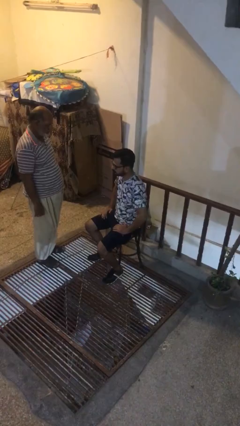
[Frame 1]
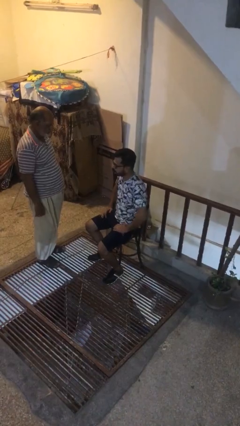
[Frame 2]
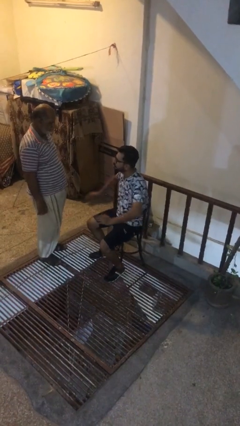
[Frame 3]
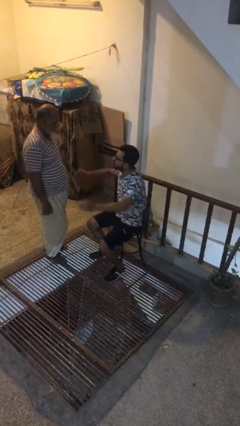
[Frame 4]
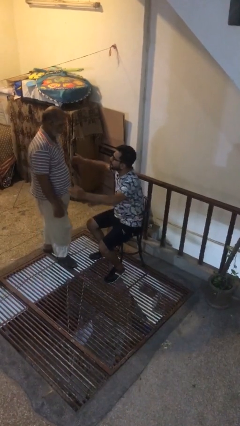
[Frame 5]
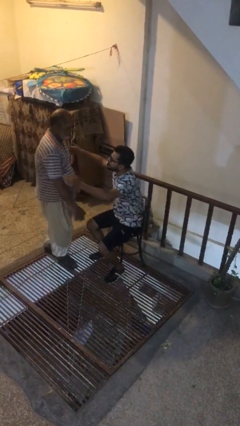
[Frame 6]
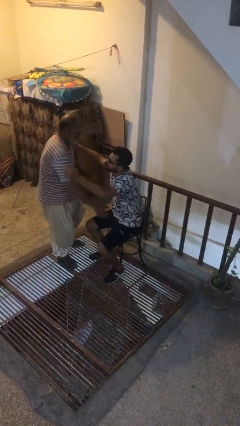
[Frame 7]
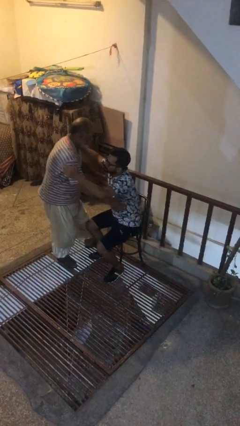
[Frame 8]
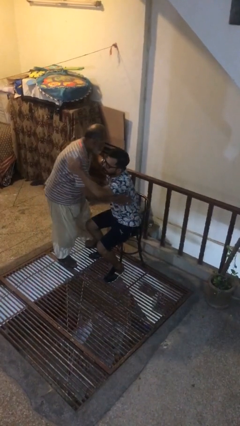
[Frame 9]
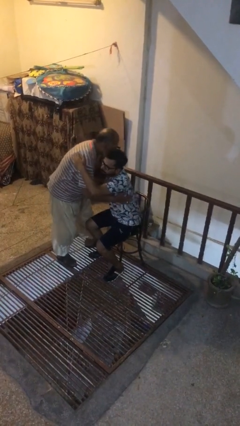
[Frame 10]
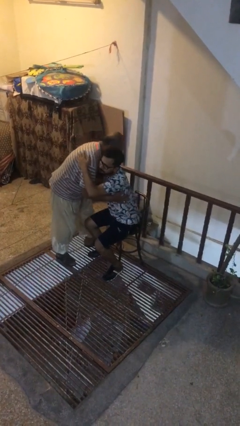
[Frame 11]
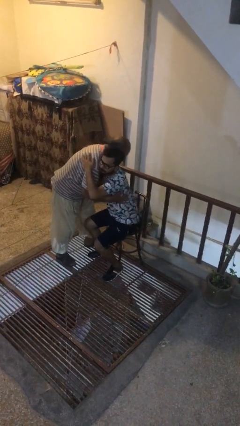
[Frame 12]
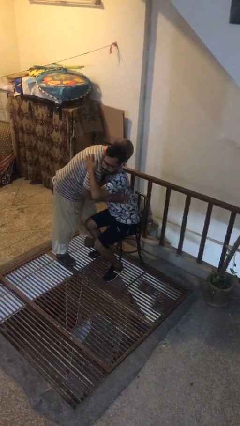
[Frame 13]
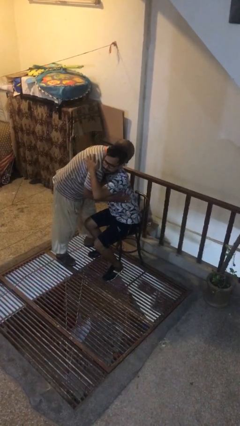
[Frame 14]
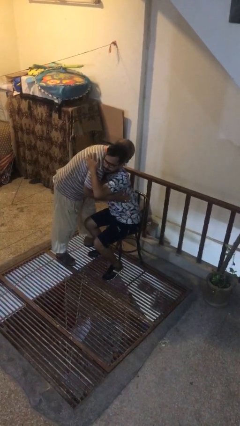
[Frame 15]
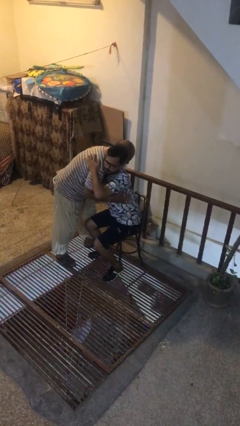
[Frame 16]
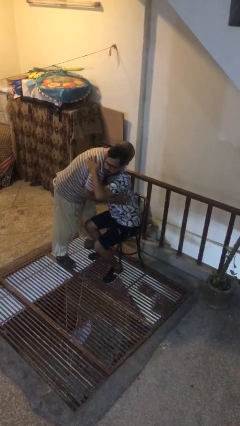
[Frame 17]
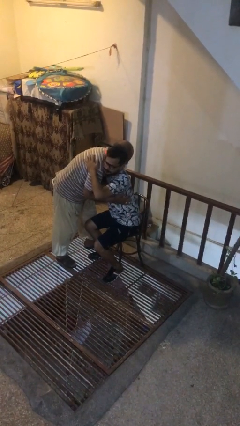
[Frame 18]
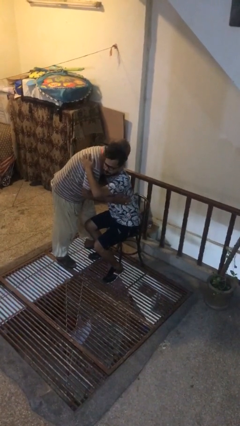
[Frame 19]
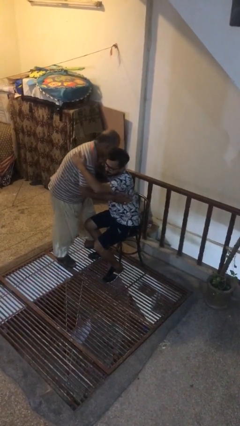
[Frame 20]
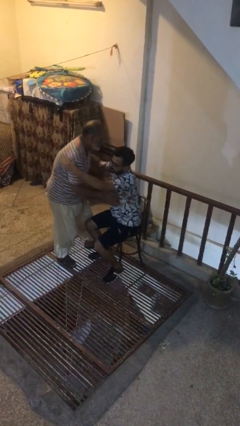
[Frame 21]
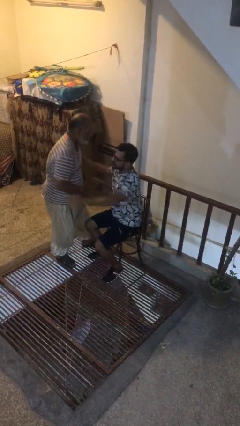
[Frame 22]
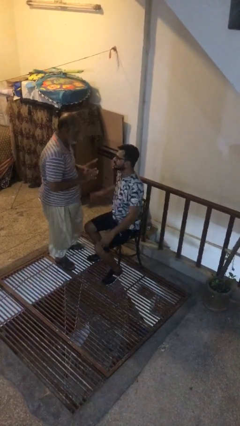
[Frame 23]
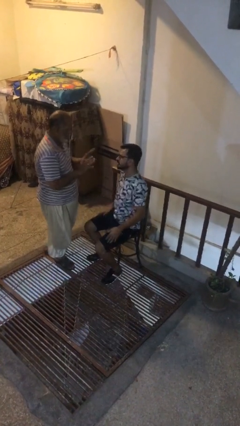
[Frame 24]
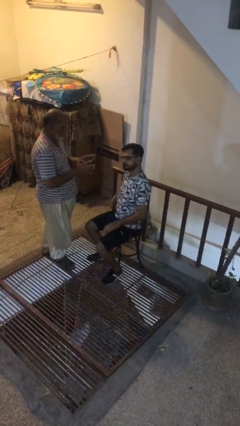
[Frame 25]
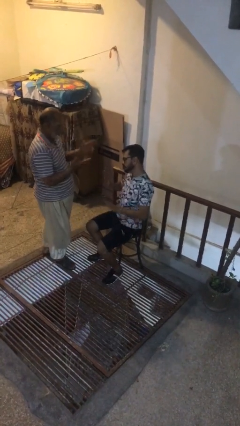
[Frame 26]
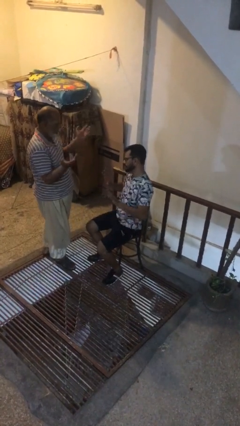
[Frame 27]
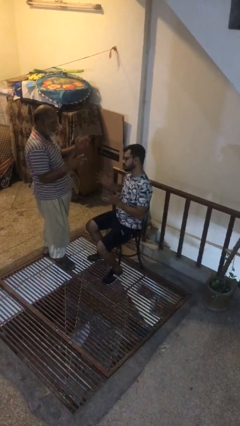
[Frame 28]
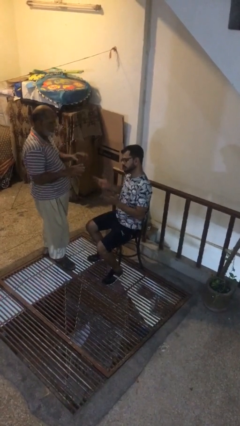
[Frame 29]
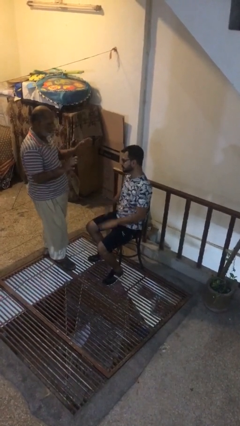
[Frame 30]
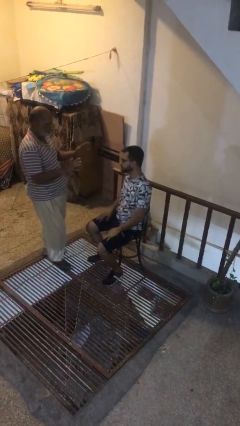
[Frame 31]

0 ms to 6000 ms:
person embraces person

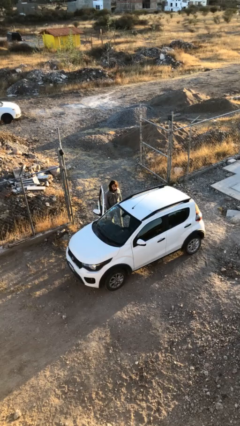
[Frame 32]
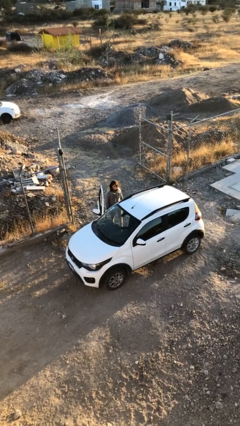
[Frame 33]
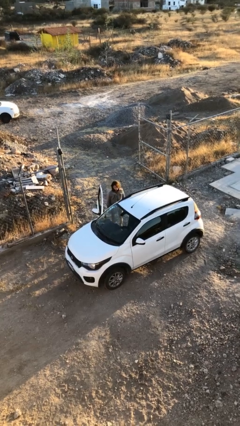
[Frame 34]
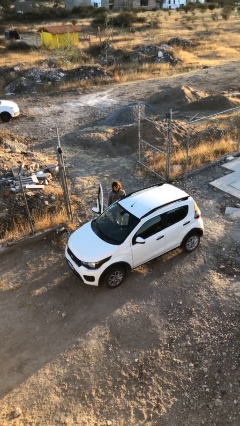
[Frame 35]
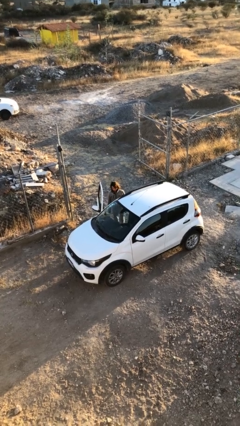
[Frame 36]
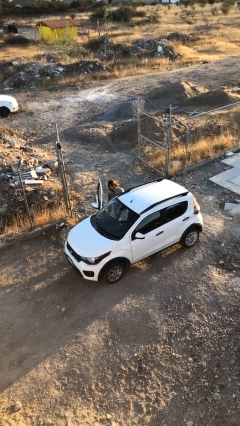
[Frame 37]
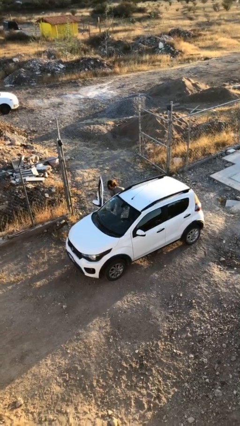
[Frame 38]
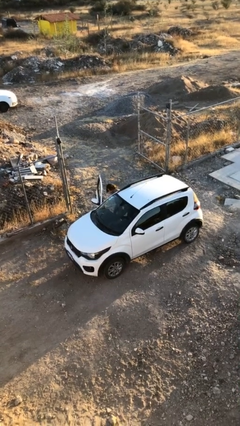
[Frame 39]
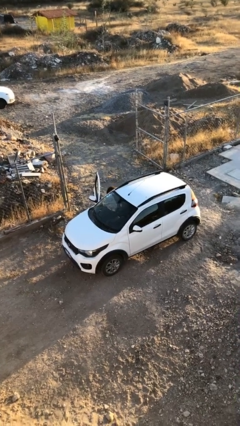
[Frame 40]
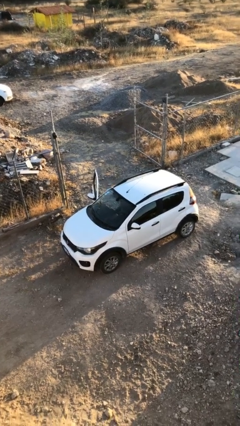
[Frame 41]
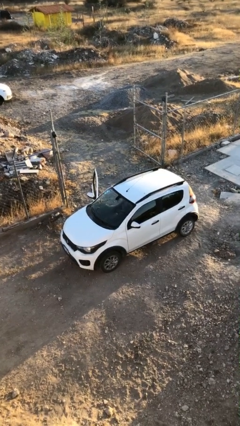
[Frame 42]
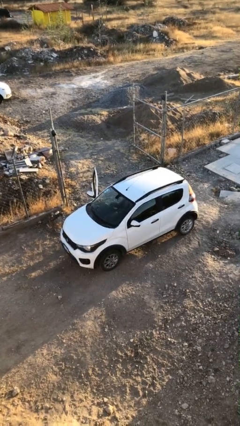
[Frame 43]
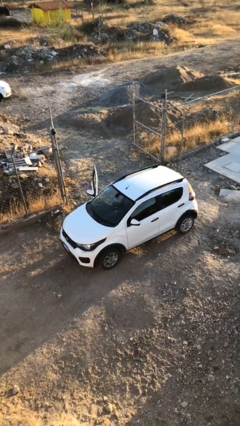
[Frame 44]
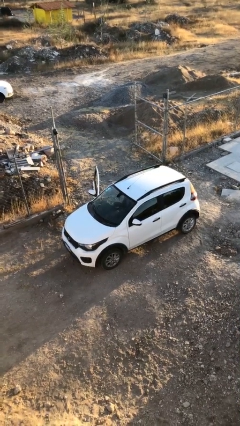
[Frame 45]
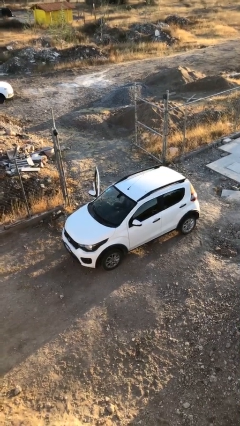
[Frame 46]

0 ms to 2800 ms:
person enters car

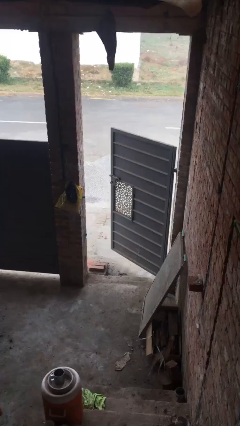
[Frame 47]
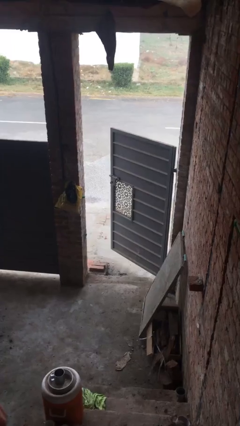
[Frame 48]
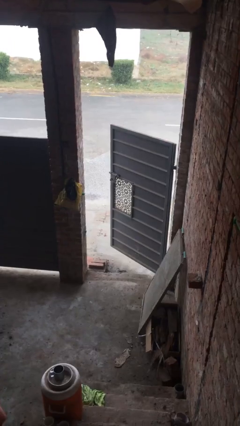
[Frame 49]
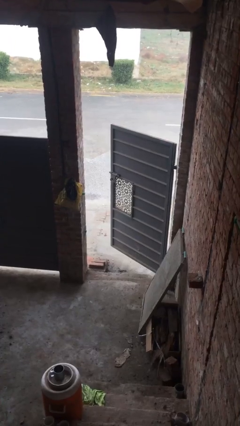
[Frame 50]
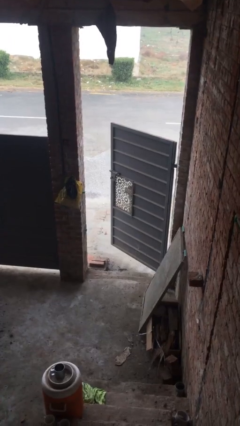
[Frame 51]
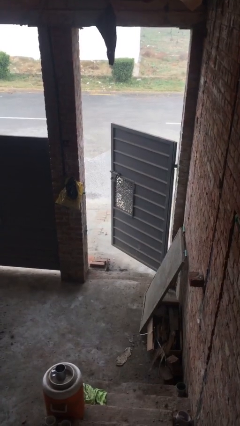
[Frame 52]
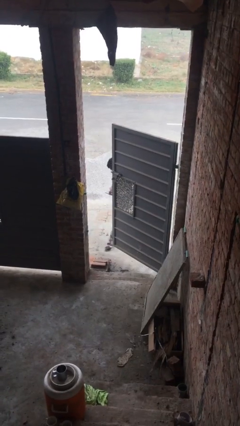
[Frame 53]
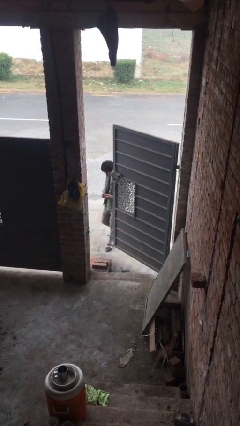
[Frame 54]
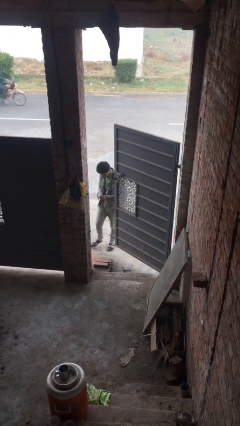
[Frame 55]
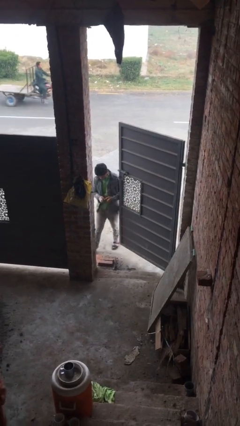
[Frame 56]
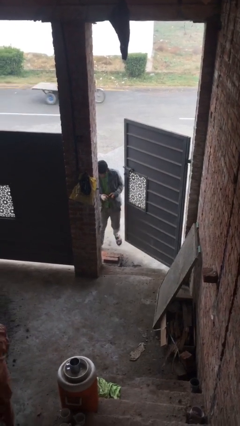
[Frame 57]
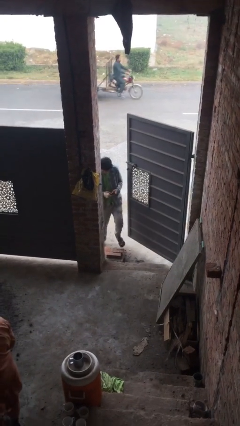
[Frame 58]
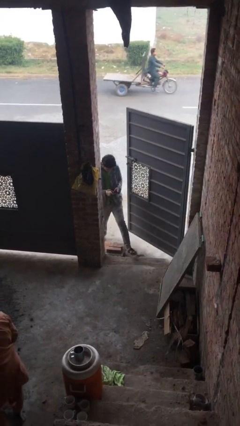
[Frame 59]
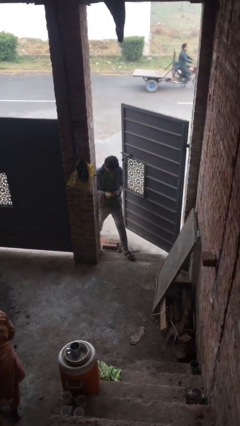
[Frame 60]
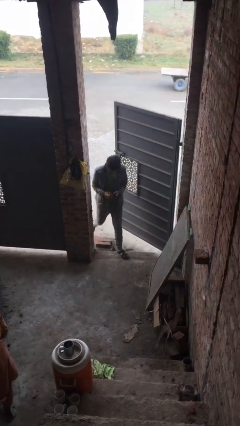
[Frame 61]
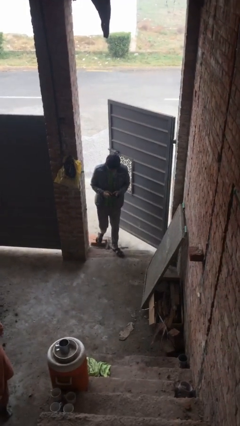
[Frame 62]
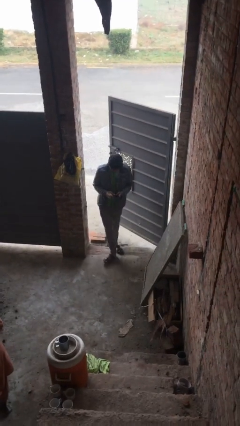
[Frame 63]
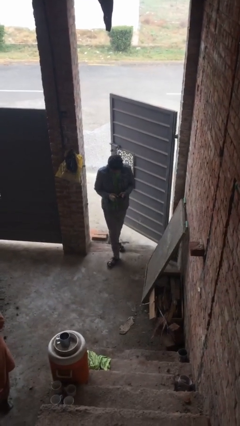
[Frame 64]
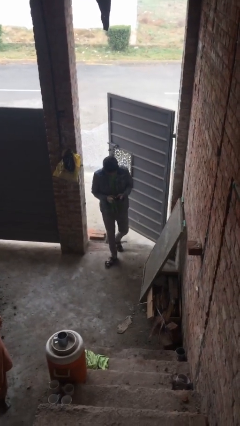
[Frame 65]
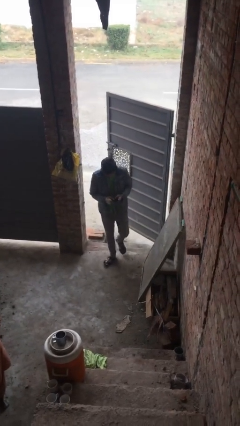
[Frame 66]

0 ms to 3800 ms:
person enters scene through structure

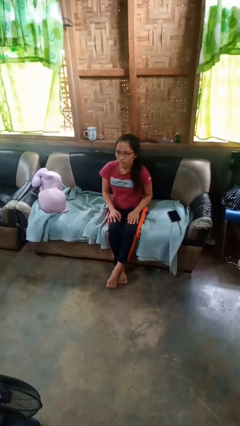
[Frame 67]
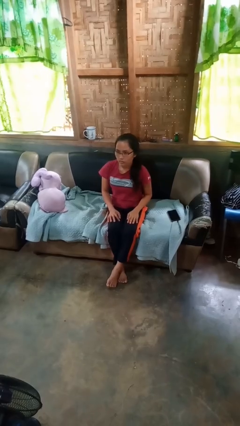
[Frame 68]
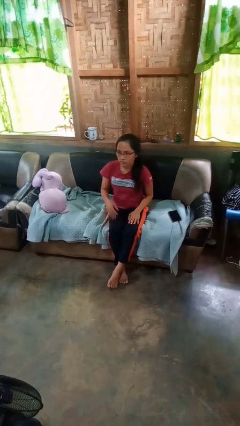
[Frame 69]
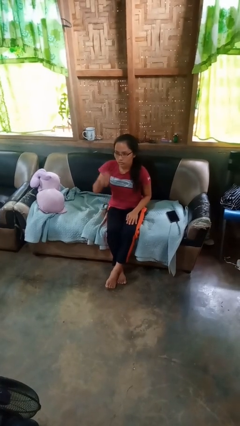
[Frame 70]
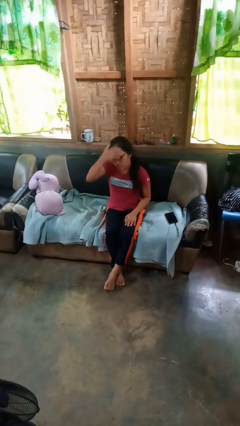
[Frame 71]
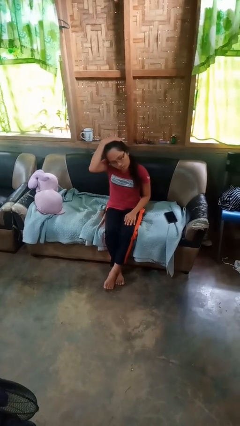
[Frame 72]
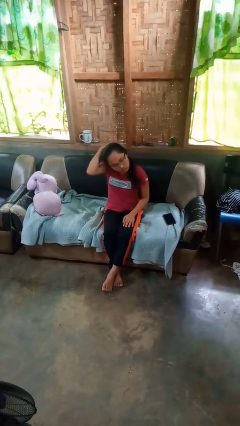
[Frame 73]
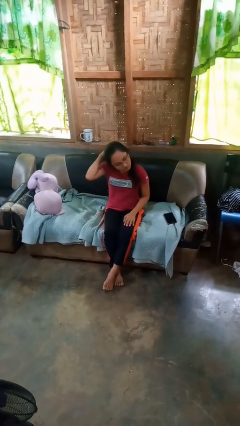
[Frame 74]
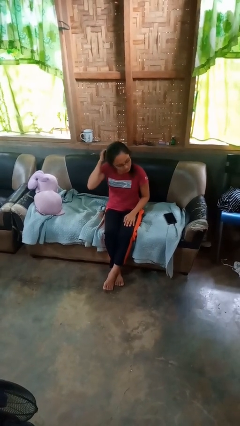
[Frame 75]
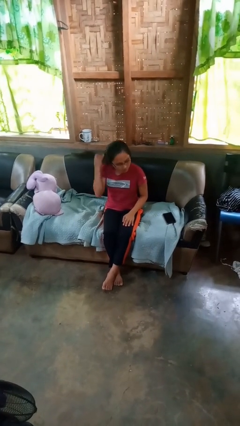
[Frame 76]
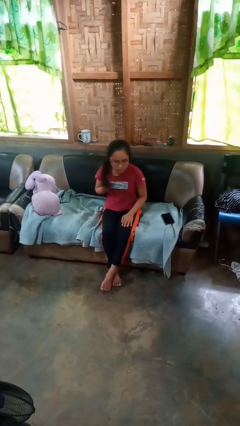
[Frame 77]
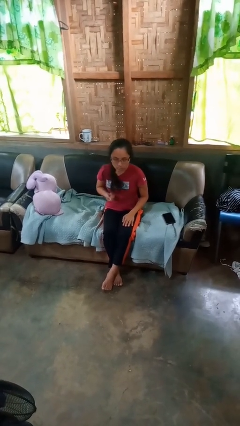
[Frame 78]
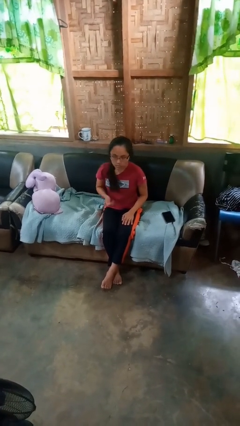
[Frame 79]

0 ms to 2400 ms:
person strokes hair

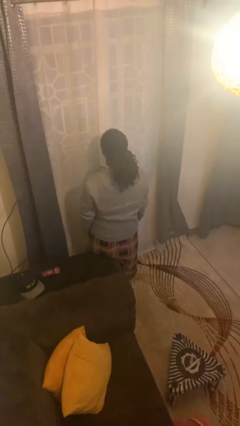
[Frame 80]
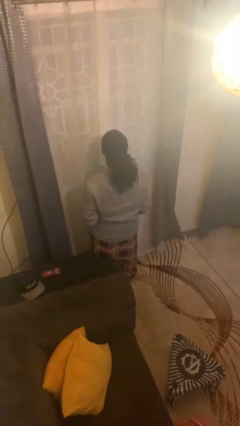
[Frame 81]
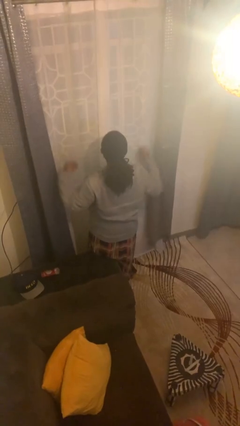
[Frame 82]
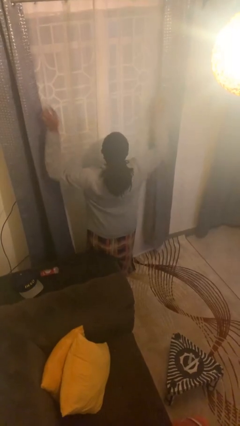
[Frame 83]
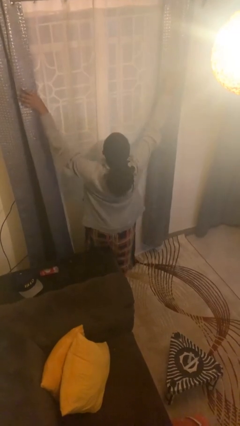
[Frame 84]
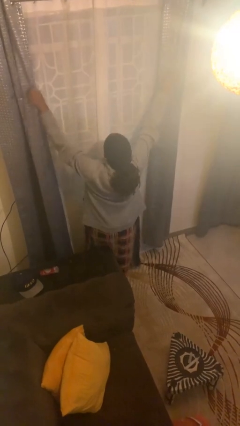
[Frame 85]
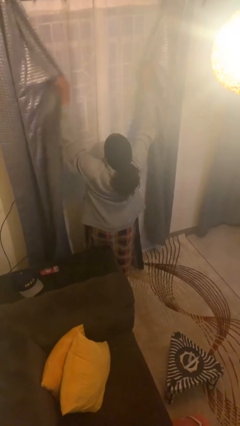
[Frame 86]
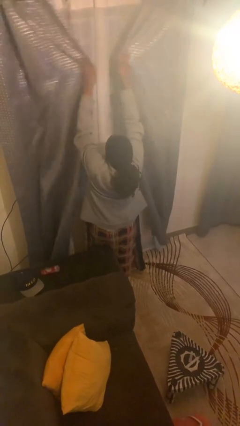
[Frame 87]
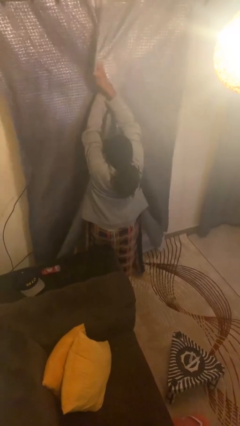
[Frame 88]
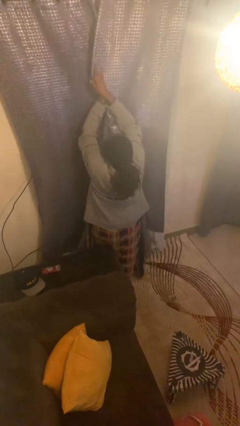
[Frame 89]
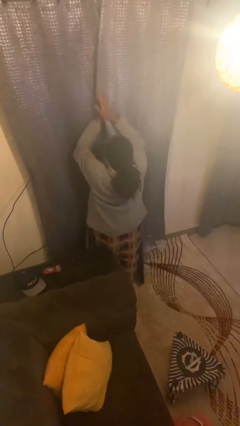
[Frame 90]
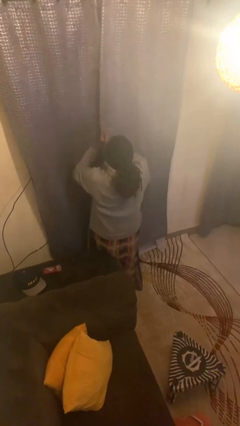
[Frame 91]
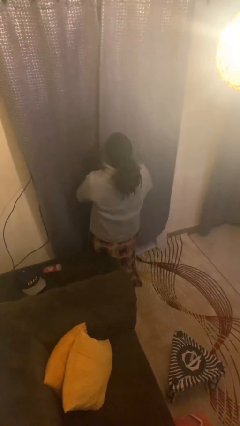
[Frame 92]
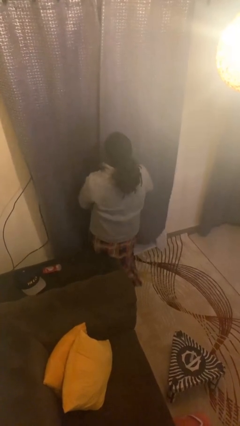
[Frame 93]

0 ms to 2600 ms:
person closes curtains

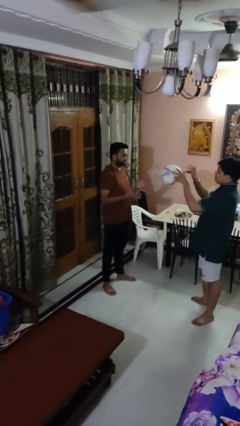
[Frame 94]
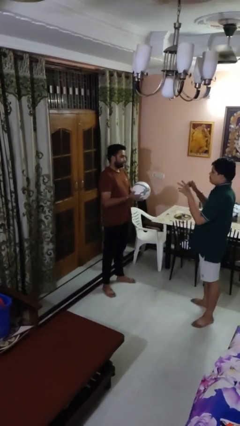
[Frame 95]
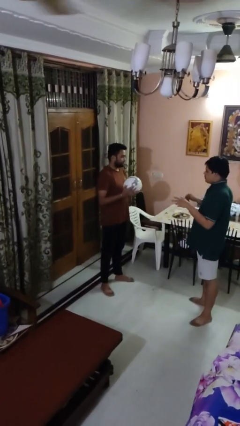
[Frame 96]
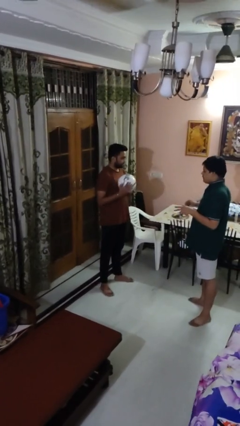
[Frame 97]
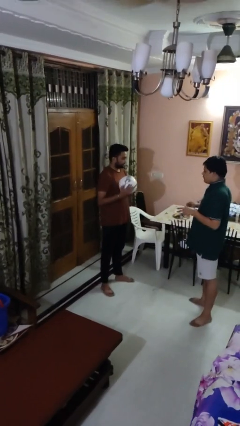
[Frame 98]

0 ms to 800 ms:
person catches object from person
